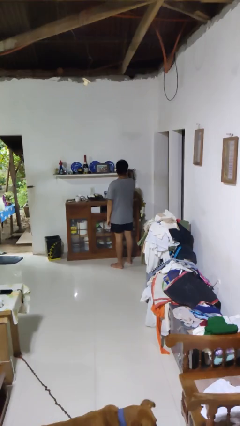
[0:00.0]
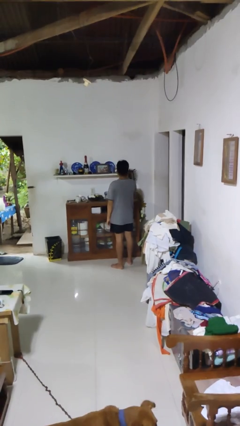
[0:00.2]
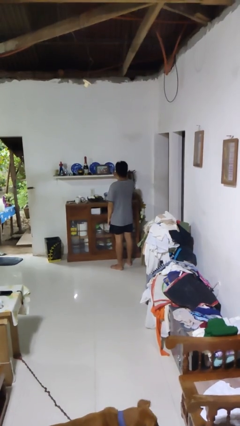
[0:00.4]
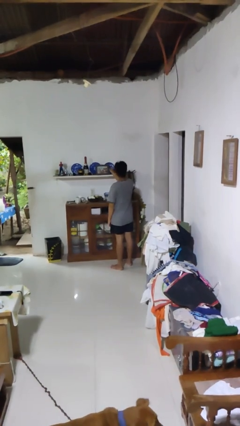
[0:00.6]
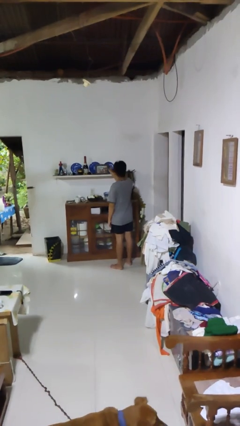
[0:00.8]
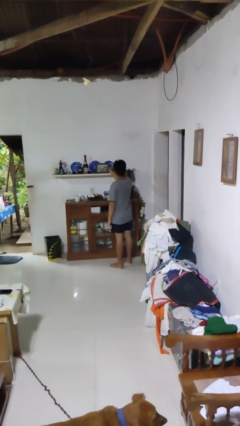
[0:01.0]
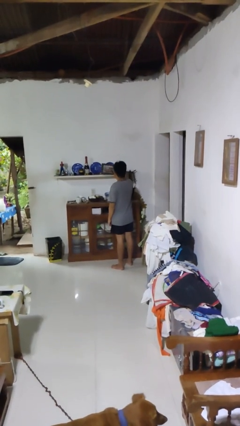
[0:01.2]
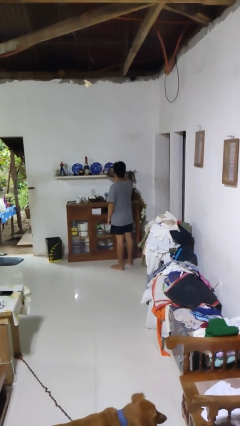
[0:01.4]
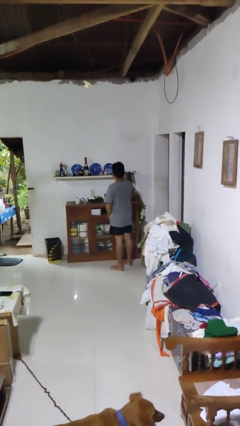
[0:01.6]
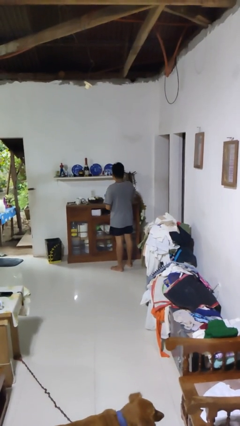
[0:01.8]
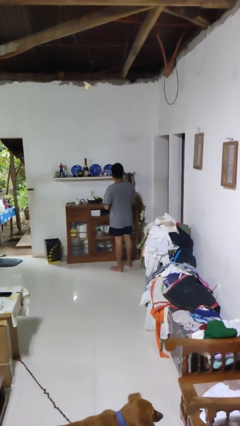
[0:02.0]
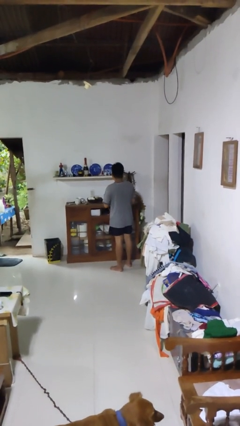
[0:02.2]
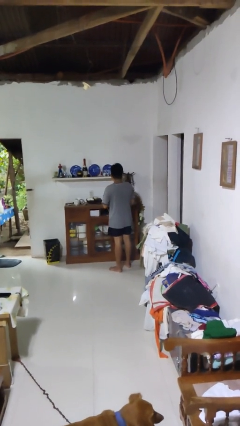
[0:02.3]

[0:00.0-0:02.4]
person picks up object from shelf

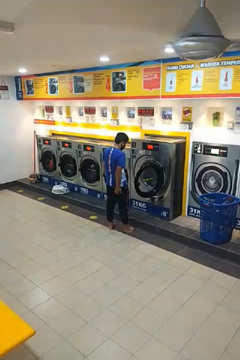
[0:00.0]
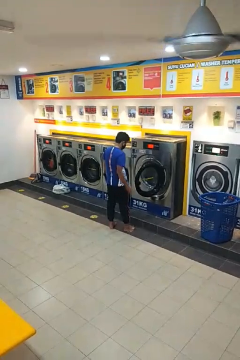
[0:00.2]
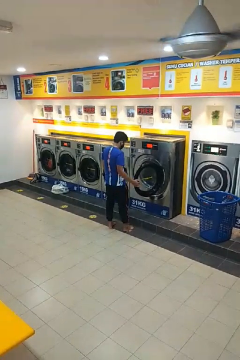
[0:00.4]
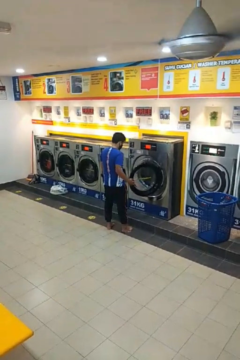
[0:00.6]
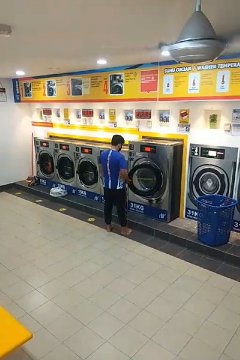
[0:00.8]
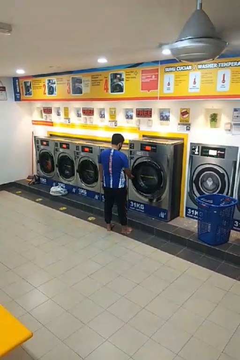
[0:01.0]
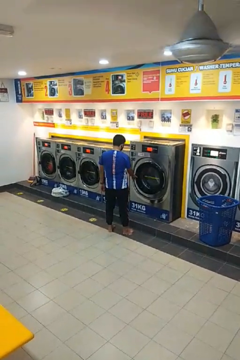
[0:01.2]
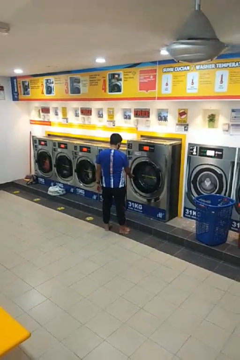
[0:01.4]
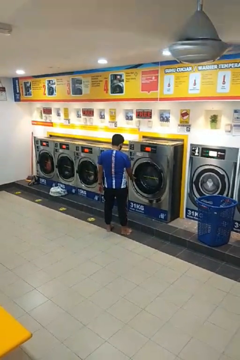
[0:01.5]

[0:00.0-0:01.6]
person closes clothes washer

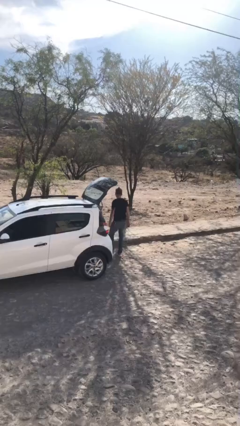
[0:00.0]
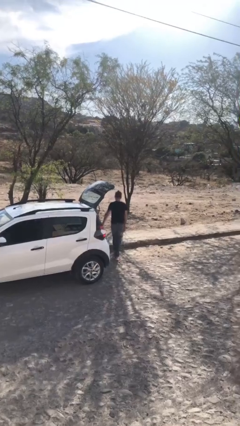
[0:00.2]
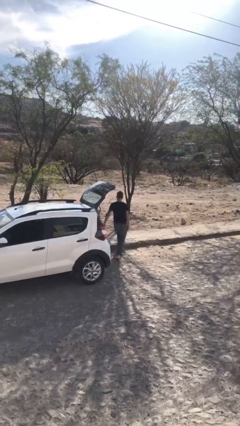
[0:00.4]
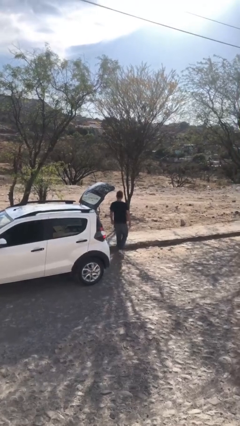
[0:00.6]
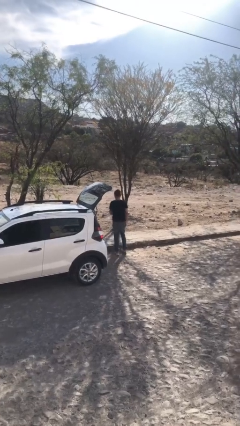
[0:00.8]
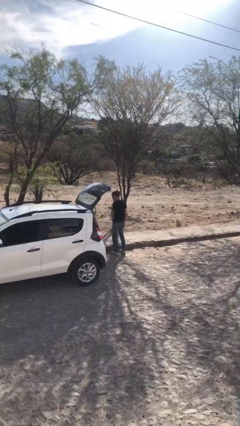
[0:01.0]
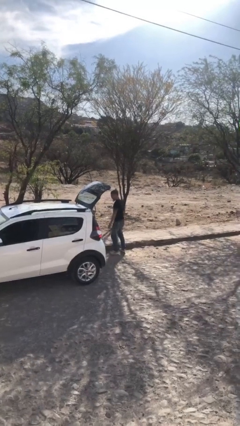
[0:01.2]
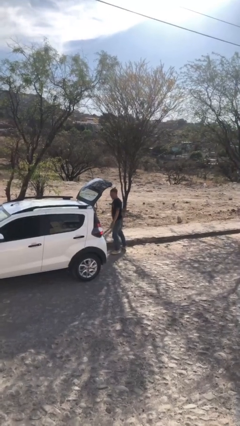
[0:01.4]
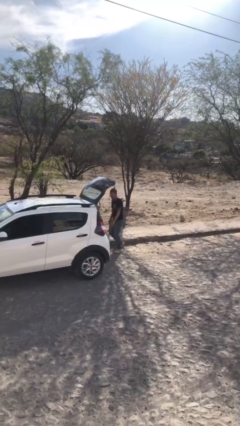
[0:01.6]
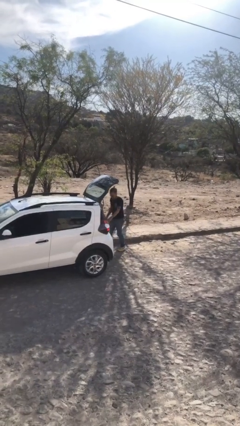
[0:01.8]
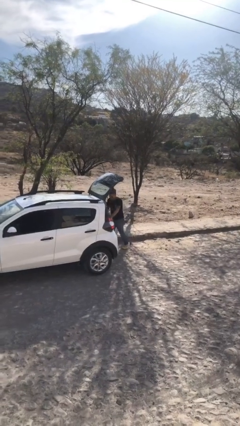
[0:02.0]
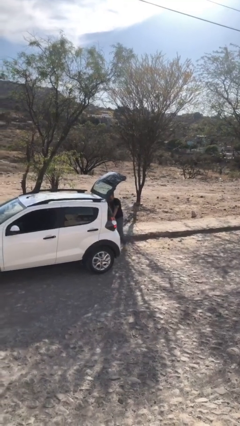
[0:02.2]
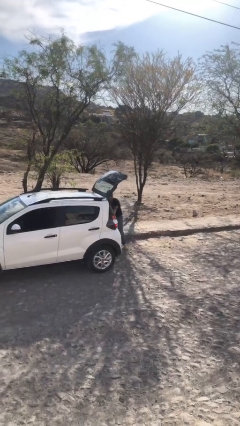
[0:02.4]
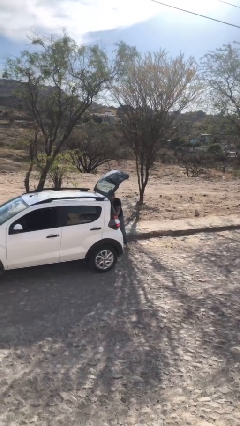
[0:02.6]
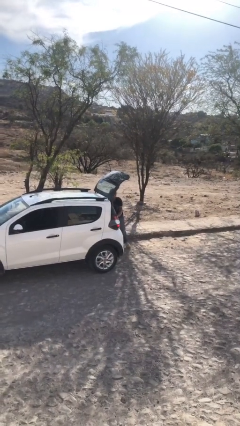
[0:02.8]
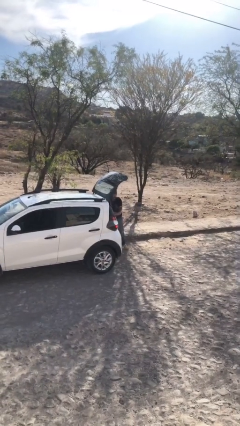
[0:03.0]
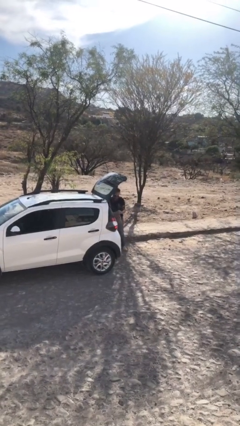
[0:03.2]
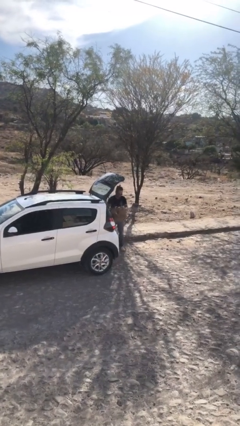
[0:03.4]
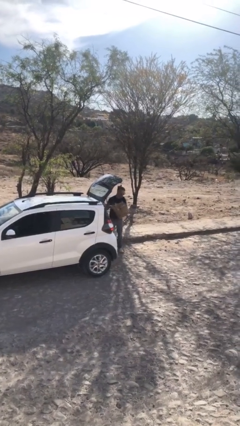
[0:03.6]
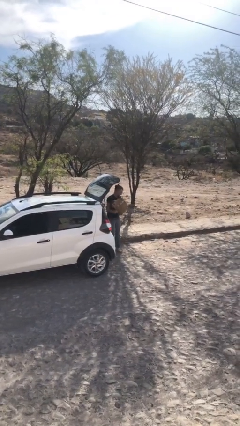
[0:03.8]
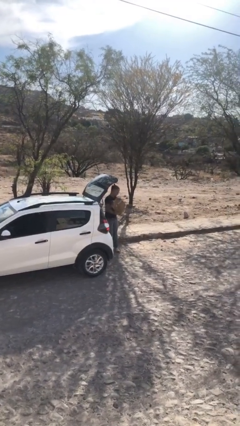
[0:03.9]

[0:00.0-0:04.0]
person unloads car

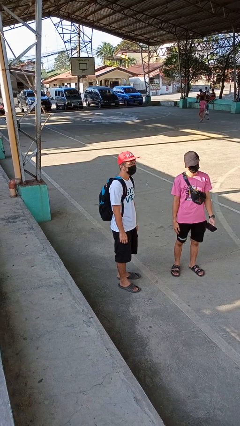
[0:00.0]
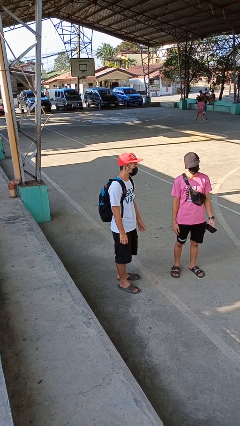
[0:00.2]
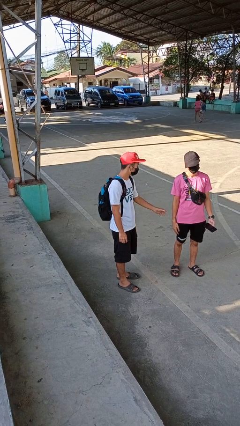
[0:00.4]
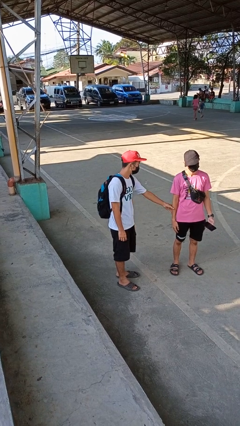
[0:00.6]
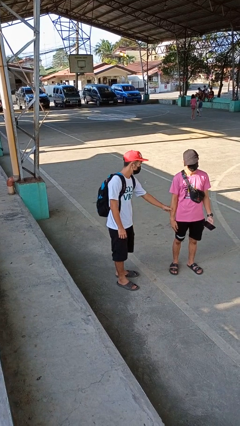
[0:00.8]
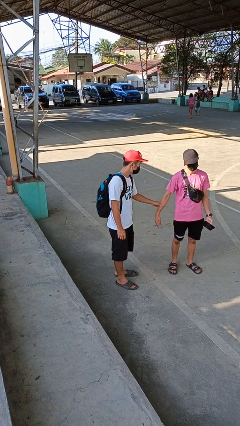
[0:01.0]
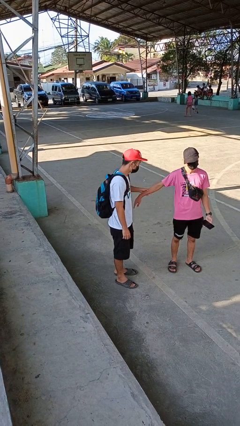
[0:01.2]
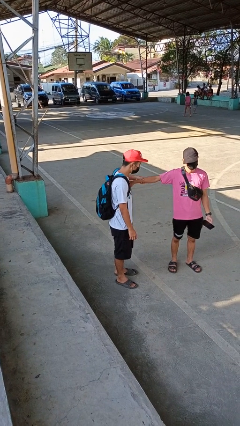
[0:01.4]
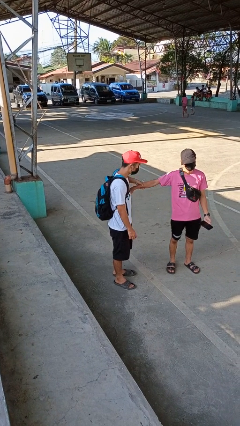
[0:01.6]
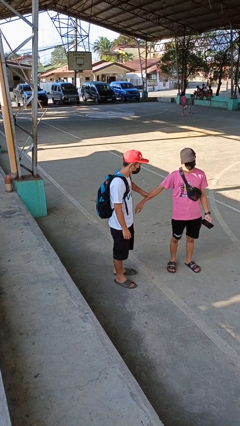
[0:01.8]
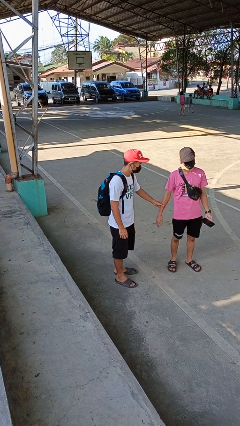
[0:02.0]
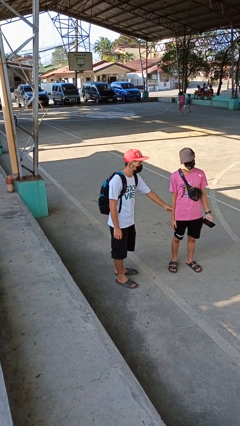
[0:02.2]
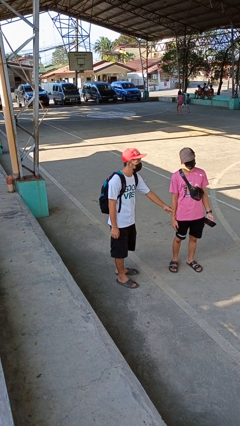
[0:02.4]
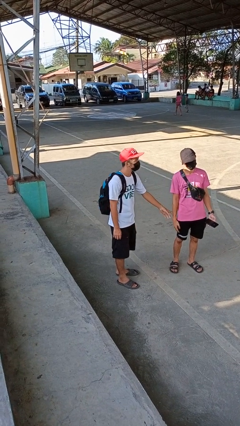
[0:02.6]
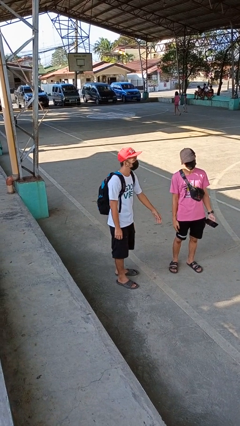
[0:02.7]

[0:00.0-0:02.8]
person grabs person by forearm

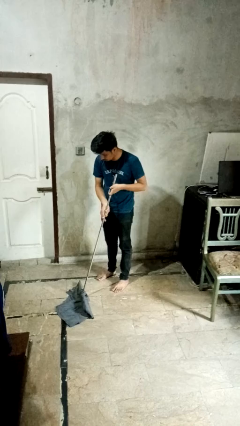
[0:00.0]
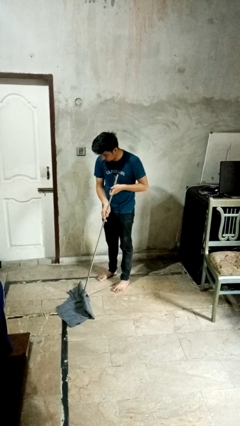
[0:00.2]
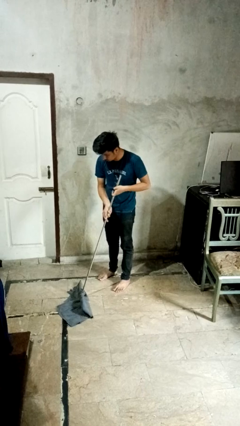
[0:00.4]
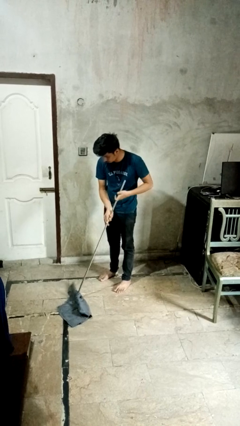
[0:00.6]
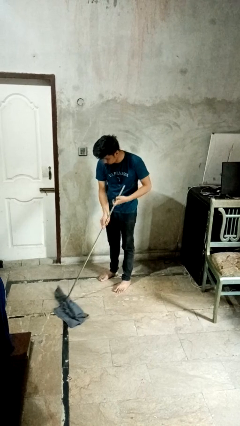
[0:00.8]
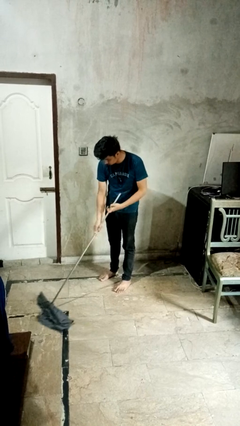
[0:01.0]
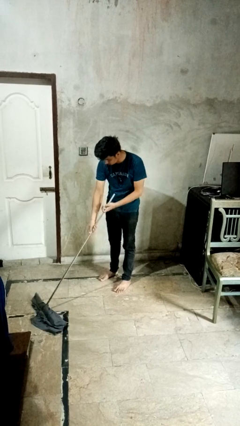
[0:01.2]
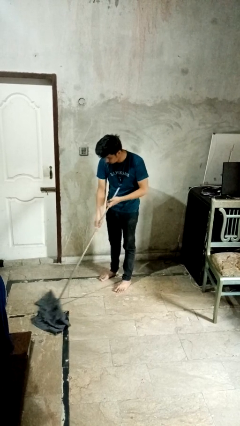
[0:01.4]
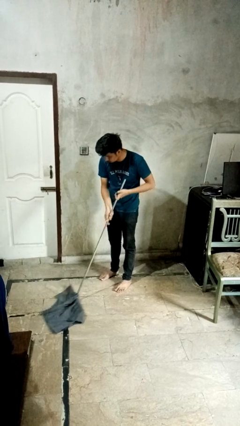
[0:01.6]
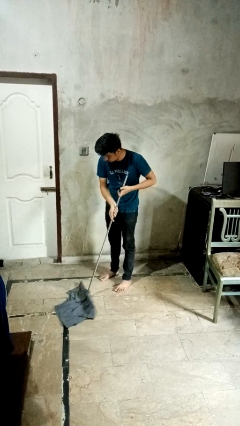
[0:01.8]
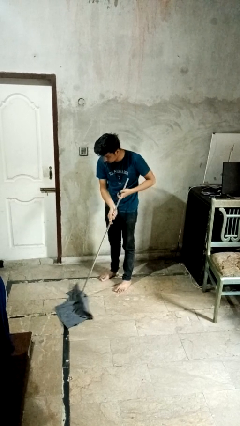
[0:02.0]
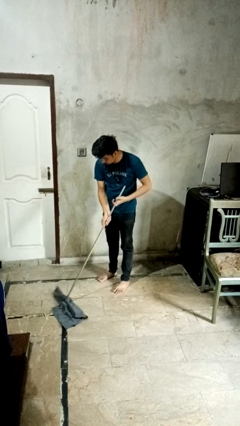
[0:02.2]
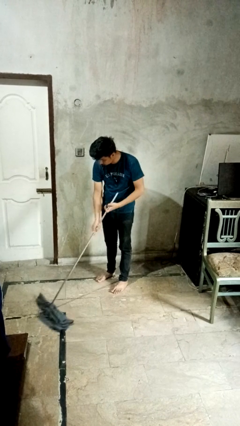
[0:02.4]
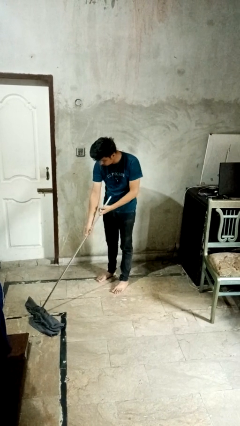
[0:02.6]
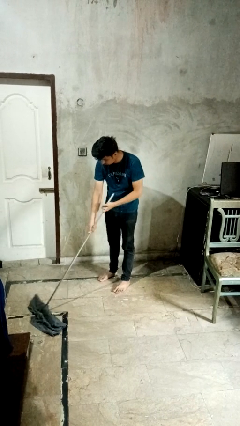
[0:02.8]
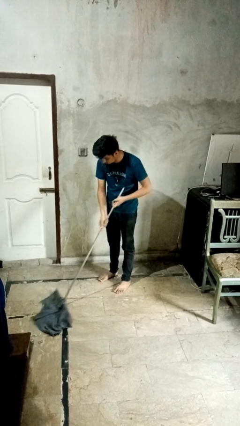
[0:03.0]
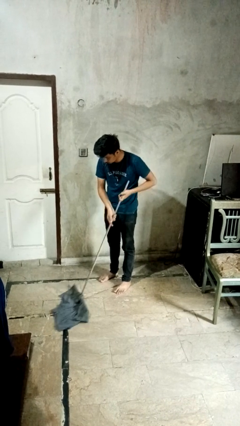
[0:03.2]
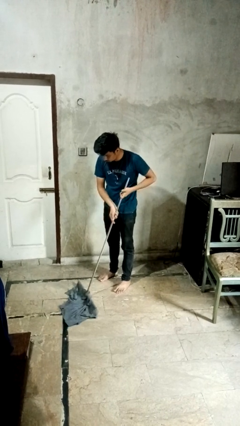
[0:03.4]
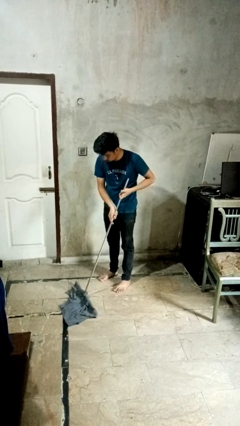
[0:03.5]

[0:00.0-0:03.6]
person mops

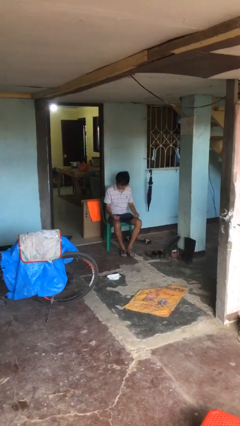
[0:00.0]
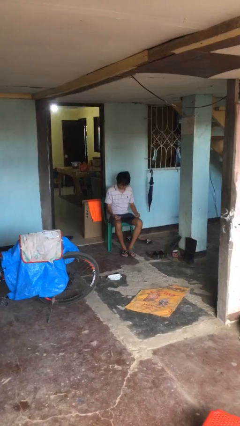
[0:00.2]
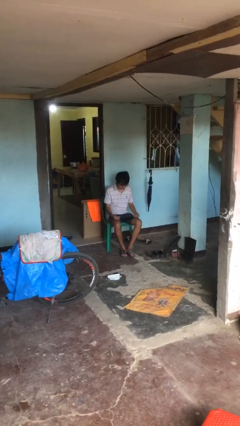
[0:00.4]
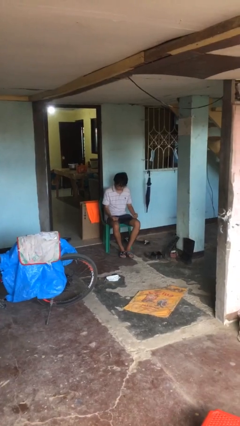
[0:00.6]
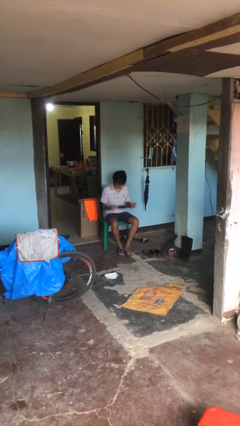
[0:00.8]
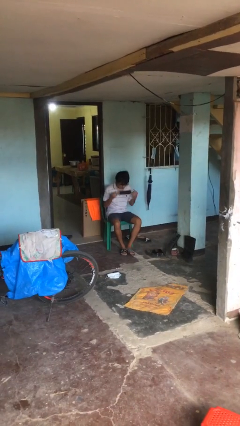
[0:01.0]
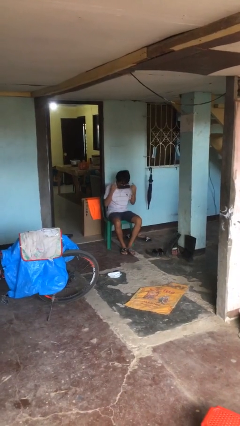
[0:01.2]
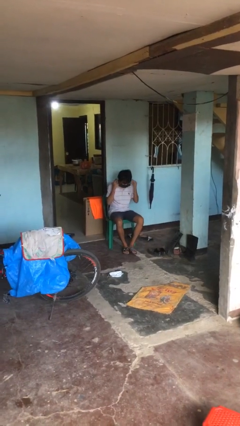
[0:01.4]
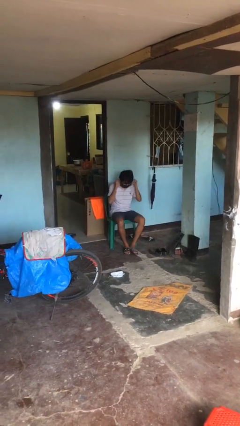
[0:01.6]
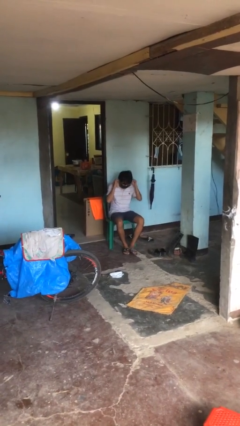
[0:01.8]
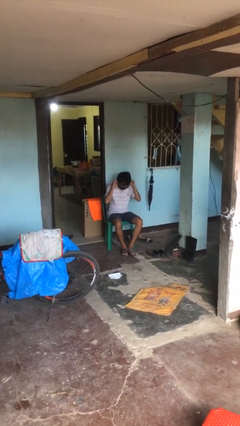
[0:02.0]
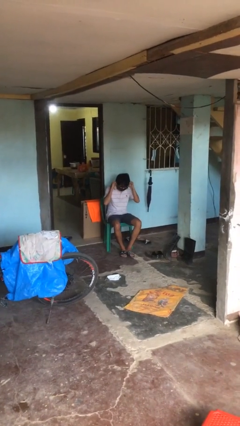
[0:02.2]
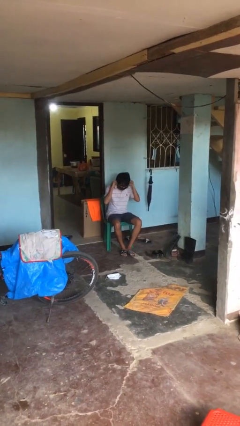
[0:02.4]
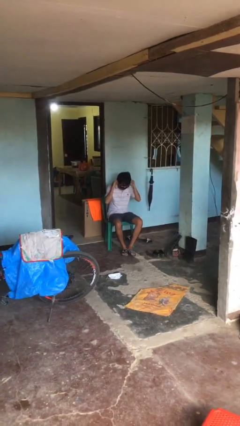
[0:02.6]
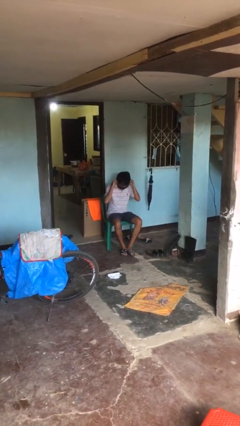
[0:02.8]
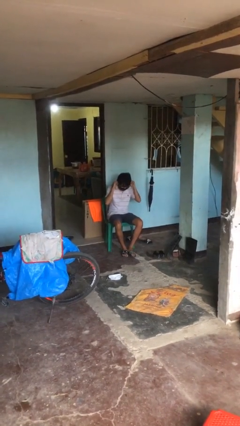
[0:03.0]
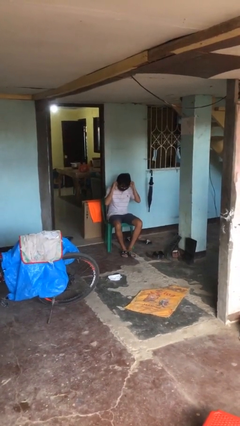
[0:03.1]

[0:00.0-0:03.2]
person puts on facemask
